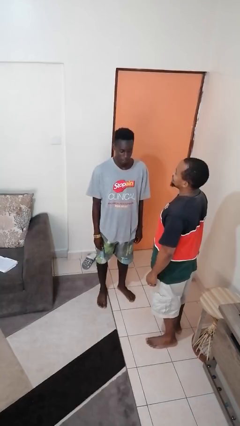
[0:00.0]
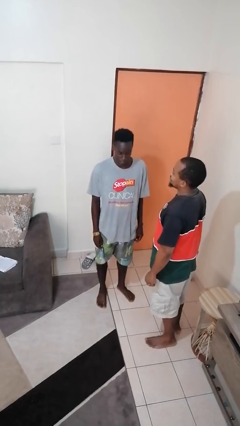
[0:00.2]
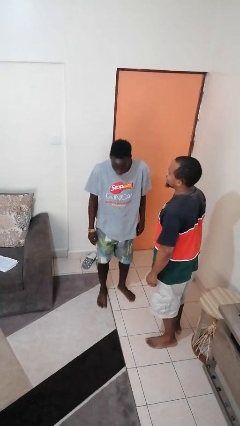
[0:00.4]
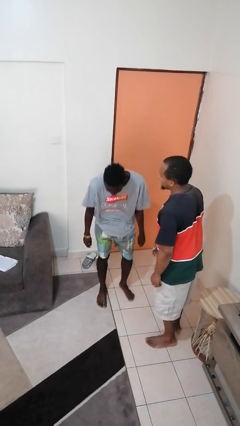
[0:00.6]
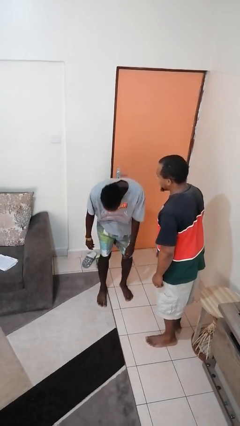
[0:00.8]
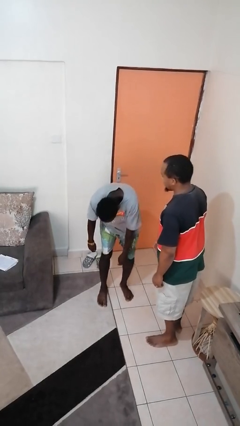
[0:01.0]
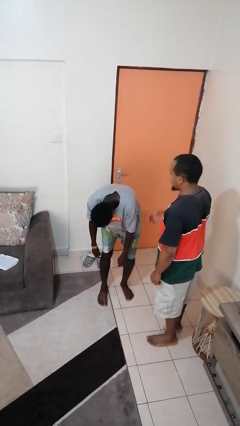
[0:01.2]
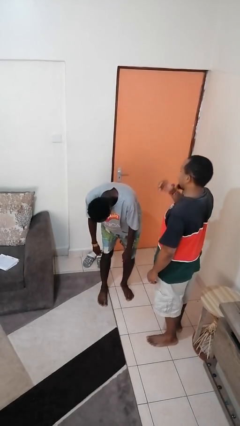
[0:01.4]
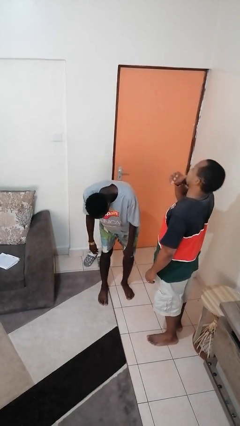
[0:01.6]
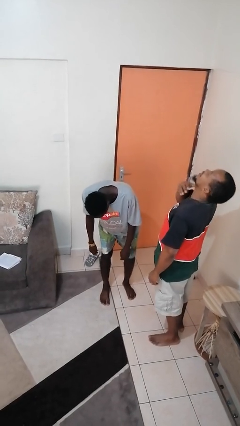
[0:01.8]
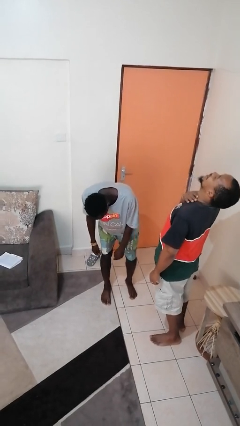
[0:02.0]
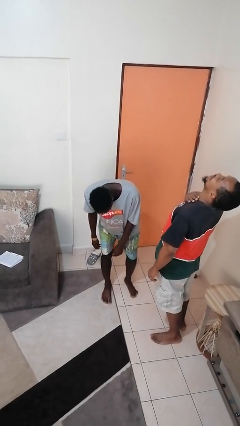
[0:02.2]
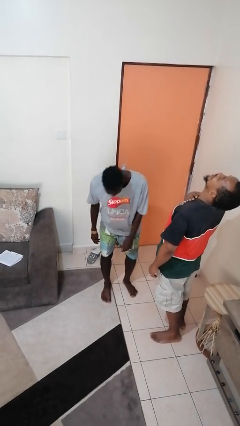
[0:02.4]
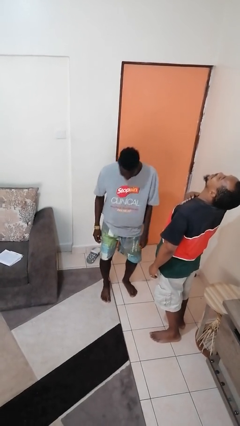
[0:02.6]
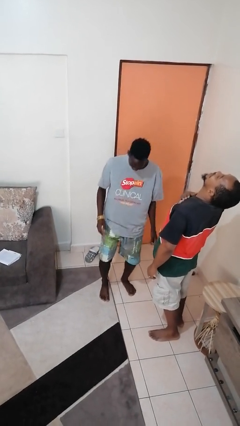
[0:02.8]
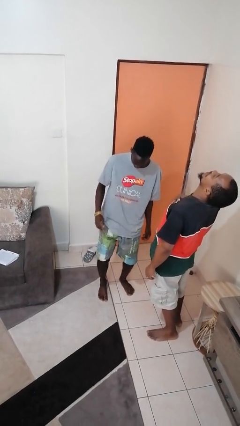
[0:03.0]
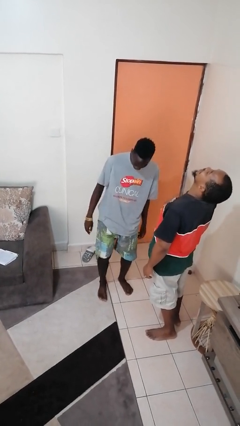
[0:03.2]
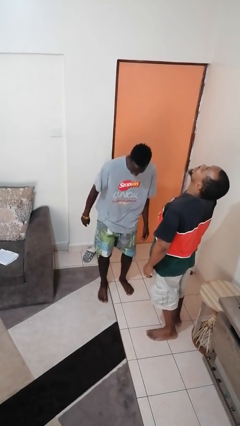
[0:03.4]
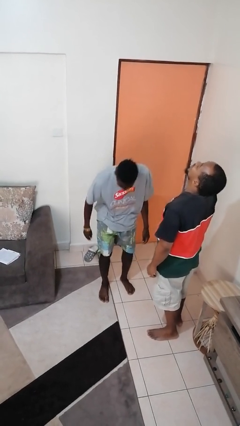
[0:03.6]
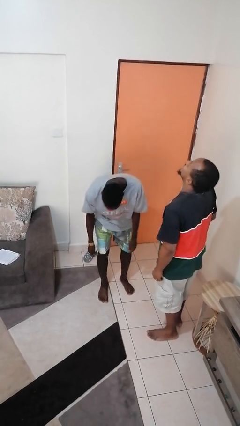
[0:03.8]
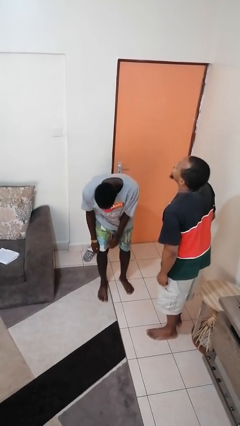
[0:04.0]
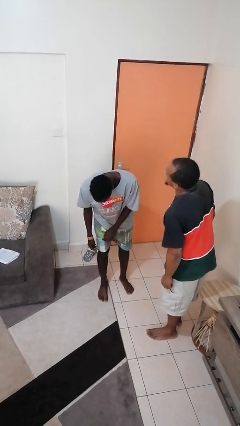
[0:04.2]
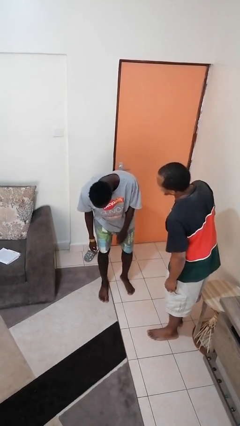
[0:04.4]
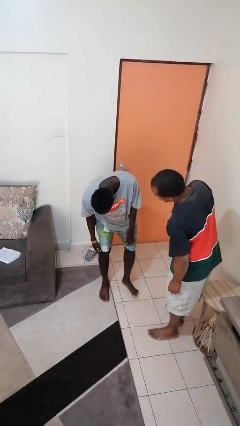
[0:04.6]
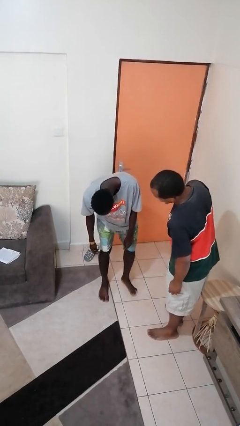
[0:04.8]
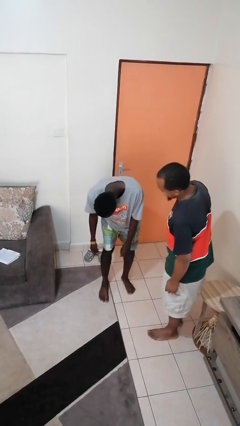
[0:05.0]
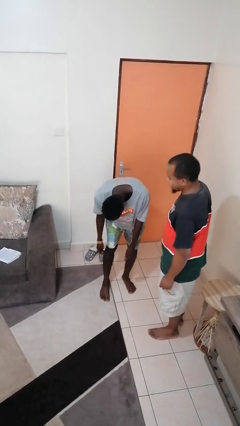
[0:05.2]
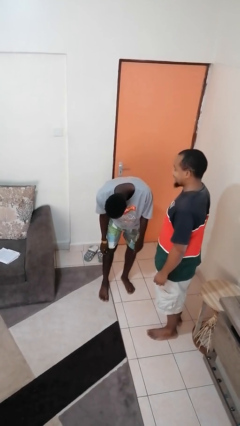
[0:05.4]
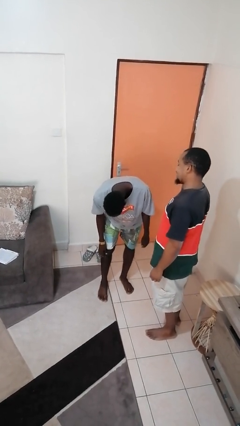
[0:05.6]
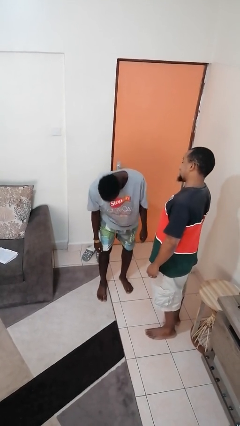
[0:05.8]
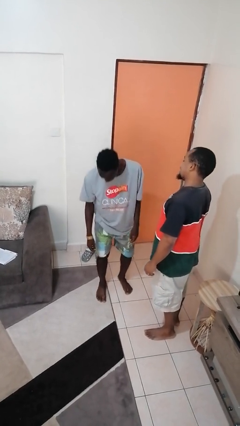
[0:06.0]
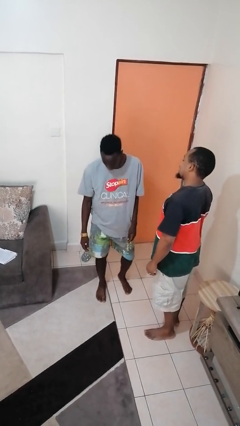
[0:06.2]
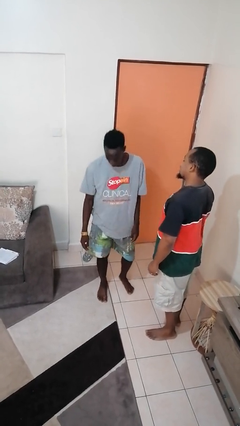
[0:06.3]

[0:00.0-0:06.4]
person laughs with person

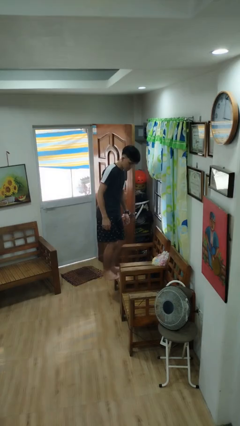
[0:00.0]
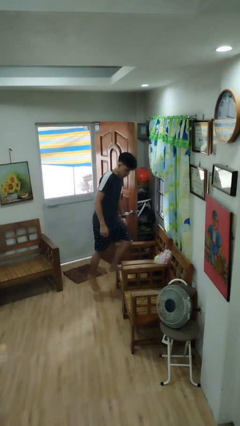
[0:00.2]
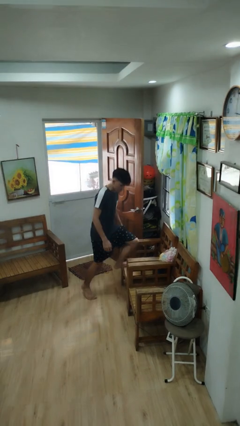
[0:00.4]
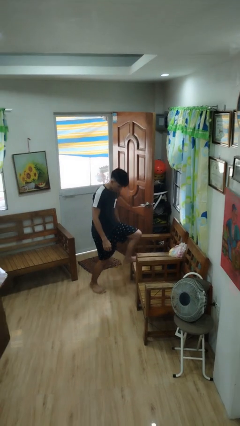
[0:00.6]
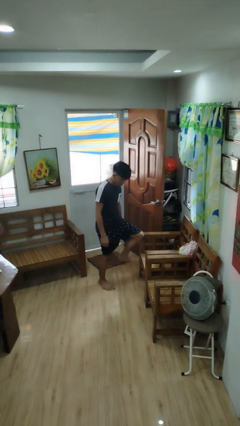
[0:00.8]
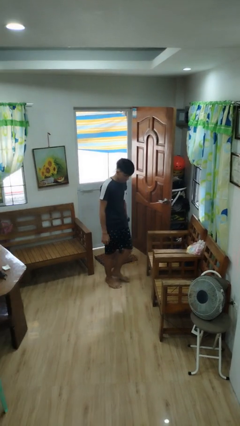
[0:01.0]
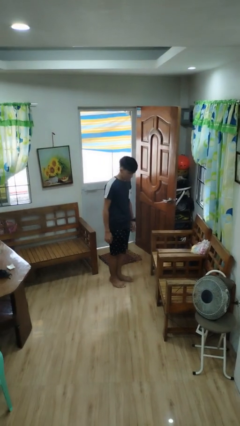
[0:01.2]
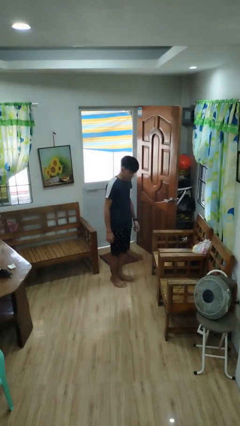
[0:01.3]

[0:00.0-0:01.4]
person climbs off chair

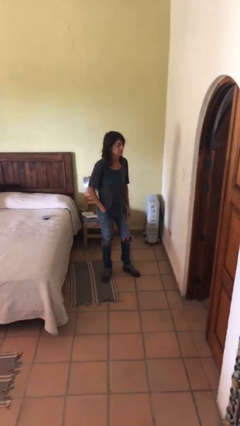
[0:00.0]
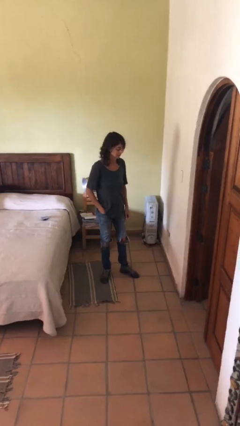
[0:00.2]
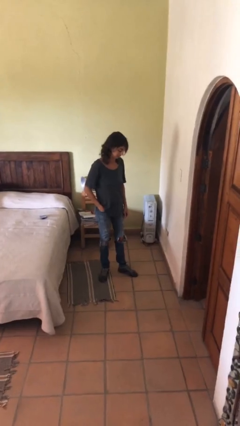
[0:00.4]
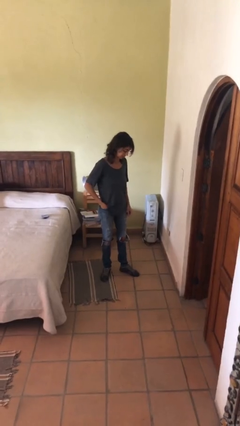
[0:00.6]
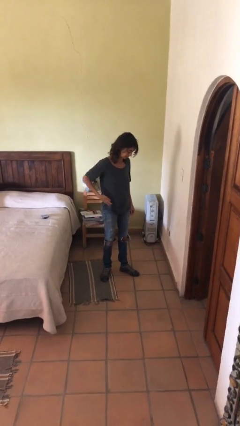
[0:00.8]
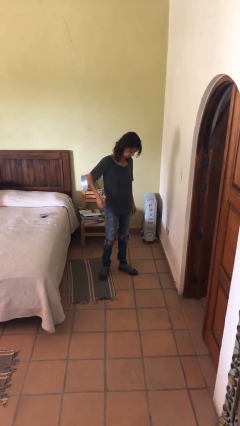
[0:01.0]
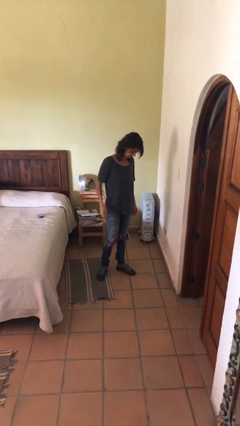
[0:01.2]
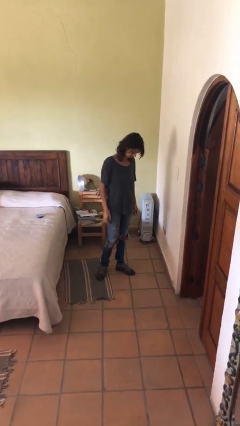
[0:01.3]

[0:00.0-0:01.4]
person puts hands in back pockets

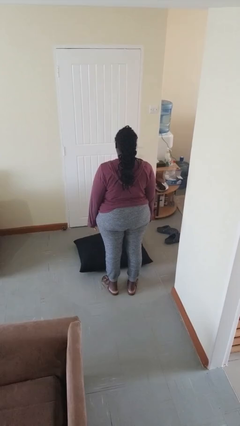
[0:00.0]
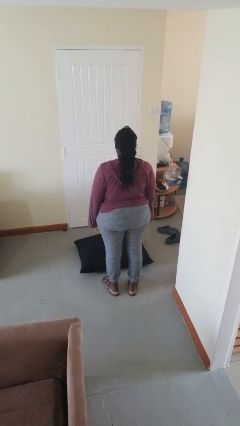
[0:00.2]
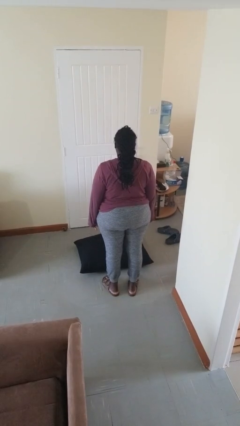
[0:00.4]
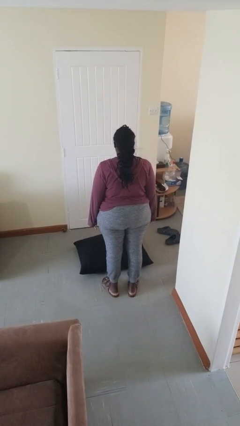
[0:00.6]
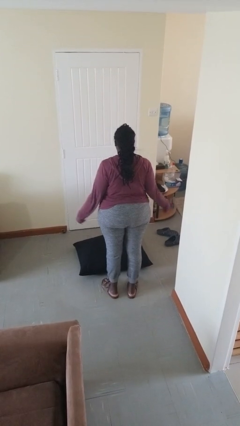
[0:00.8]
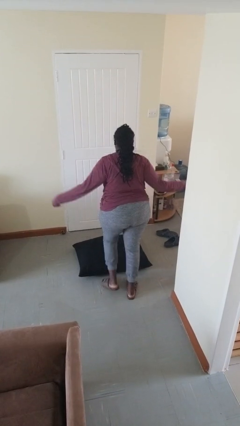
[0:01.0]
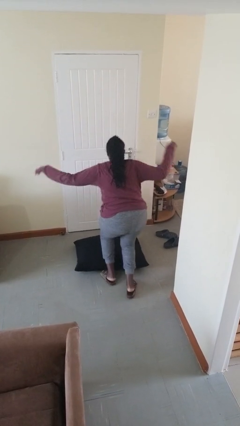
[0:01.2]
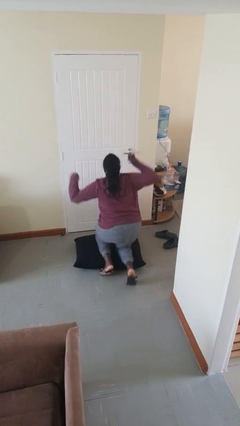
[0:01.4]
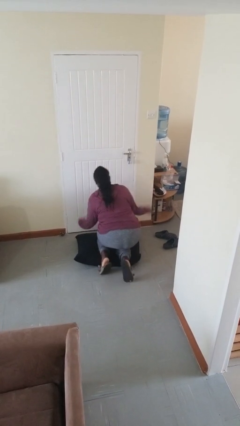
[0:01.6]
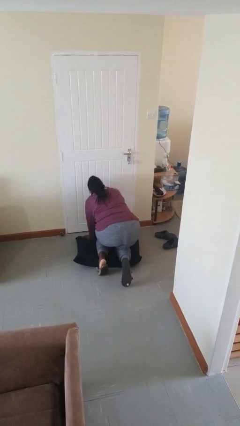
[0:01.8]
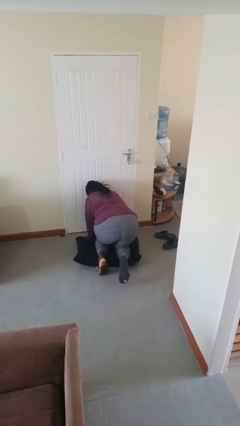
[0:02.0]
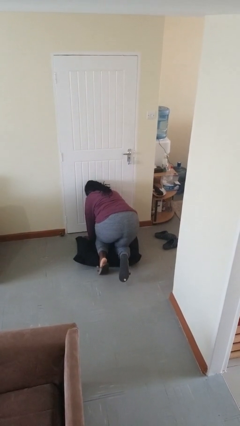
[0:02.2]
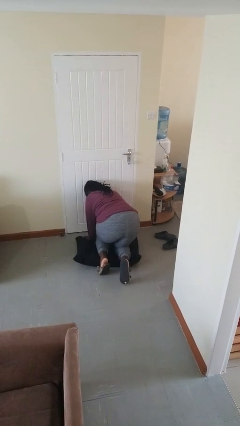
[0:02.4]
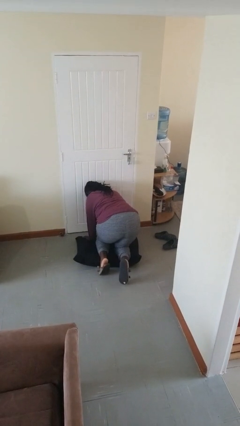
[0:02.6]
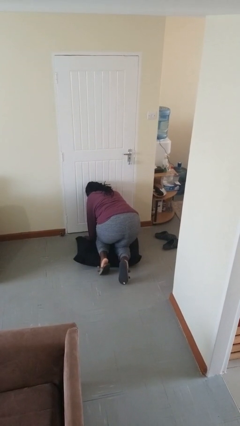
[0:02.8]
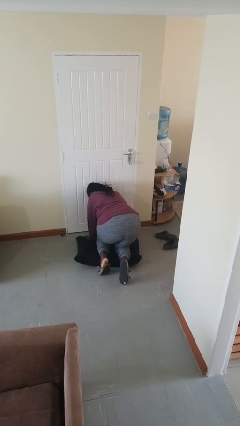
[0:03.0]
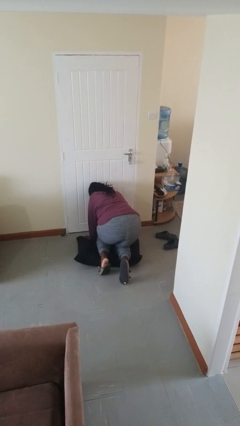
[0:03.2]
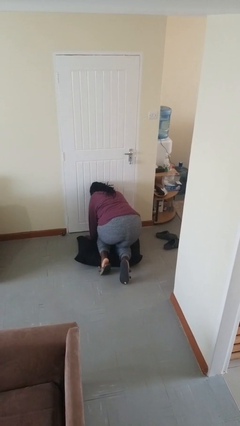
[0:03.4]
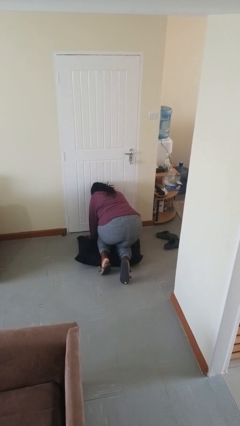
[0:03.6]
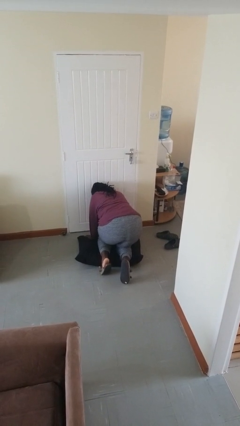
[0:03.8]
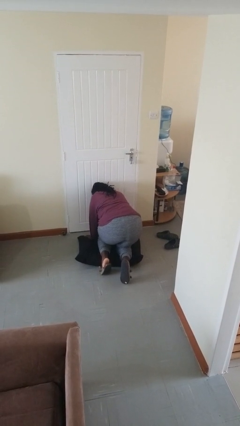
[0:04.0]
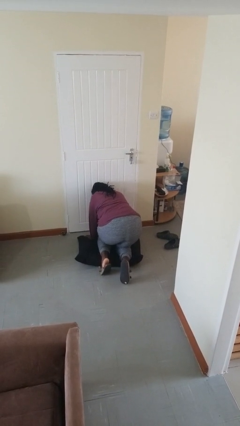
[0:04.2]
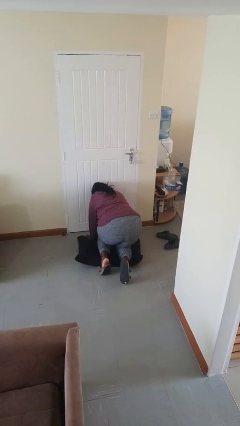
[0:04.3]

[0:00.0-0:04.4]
person trips on object on floor

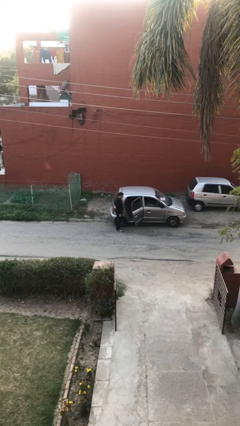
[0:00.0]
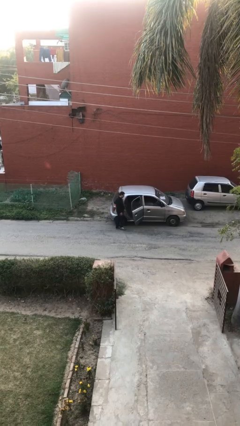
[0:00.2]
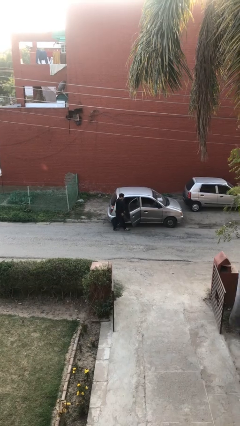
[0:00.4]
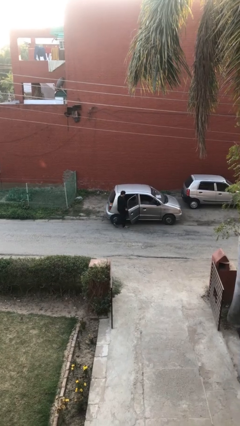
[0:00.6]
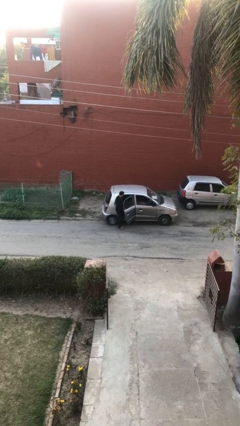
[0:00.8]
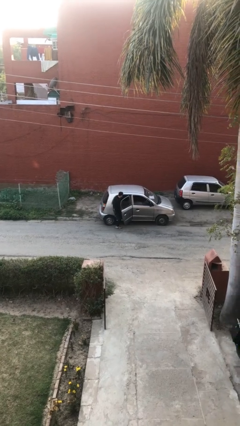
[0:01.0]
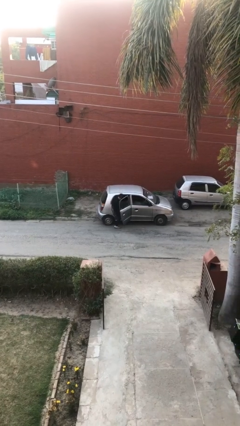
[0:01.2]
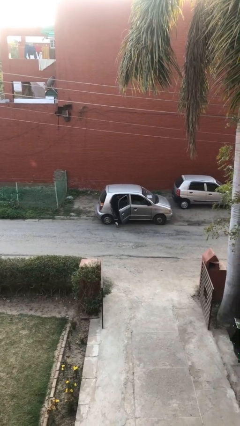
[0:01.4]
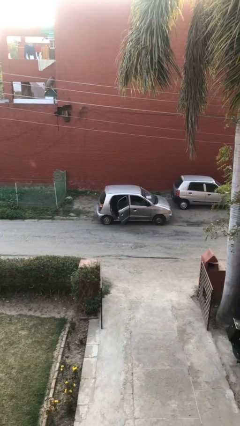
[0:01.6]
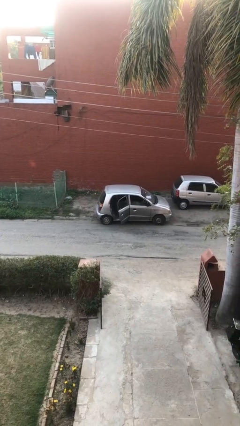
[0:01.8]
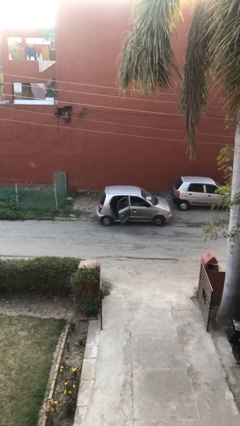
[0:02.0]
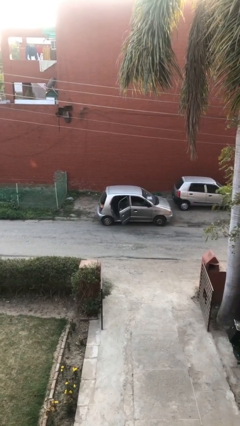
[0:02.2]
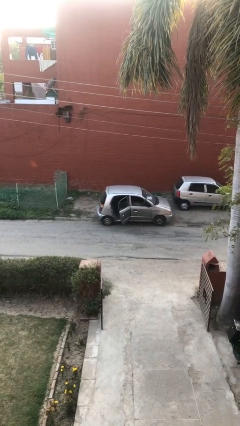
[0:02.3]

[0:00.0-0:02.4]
person enters car

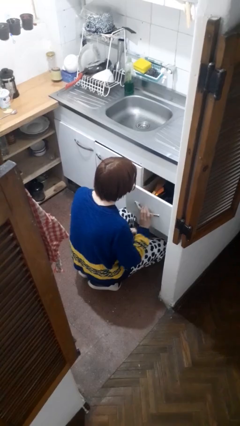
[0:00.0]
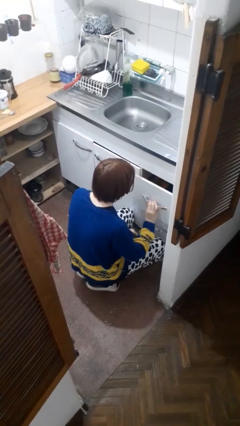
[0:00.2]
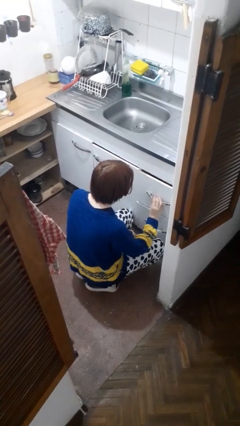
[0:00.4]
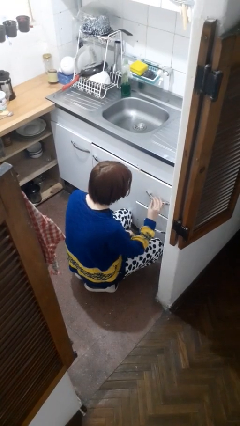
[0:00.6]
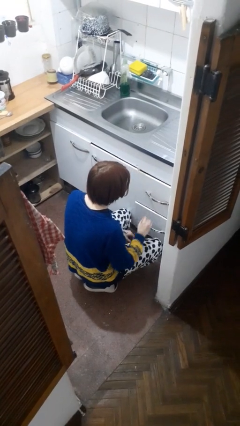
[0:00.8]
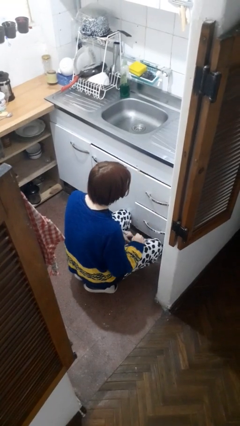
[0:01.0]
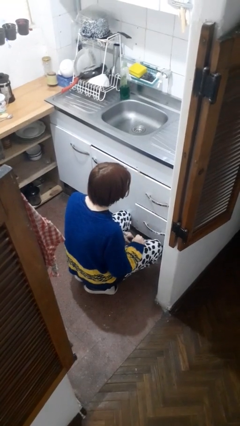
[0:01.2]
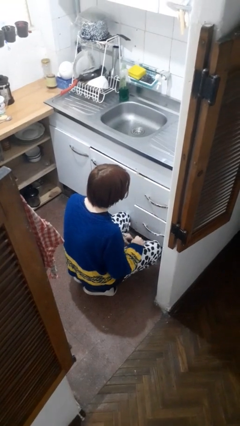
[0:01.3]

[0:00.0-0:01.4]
person closes kitchen drawer
